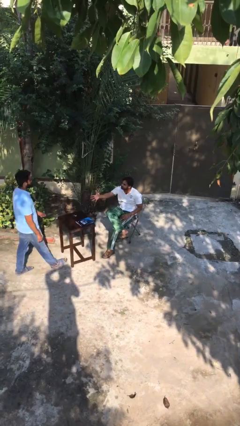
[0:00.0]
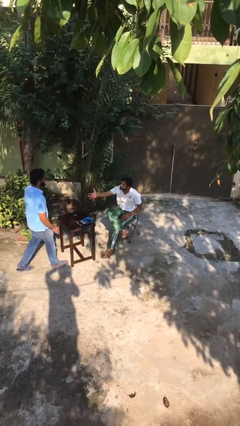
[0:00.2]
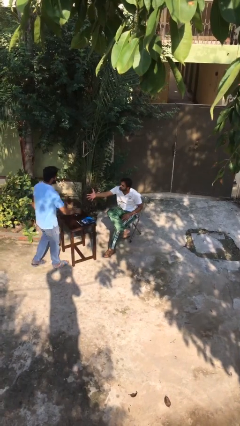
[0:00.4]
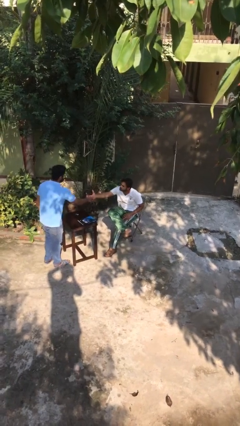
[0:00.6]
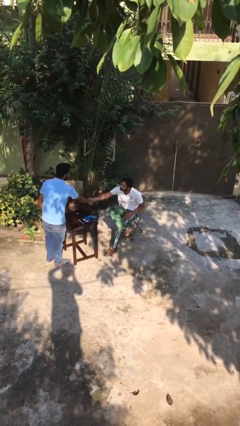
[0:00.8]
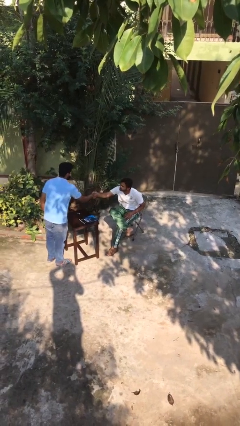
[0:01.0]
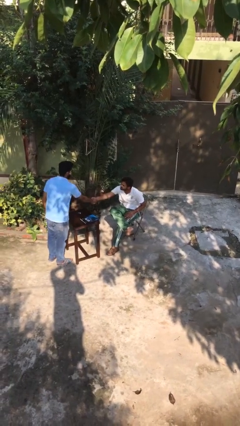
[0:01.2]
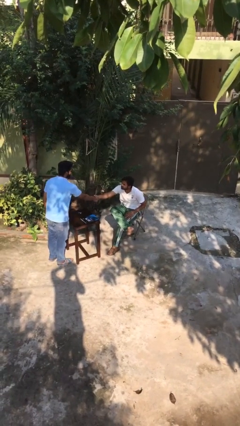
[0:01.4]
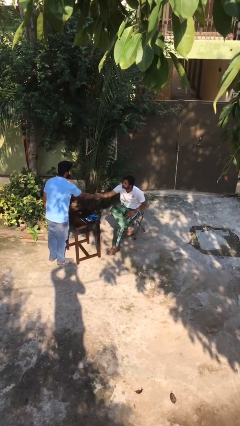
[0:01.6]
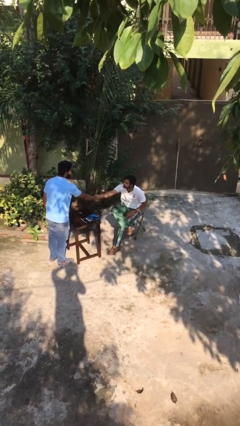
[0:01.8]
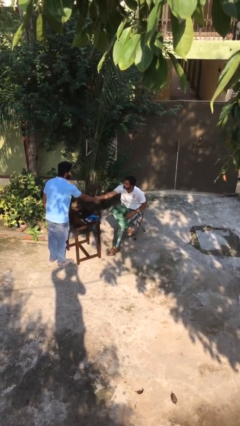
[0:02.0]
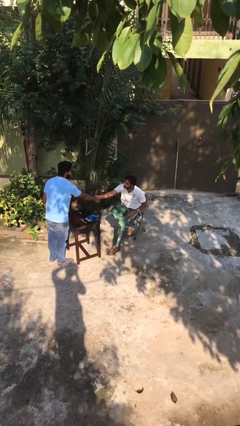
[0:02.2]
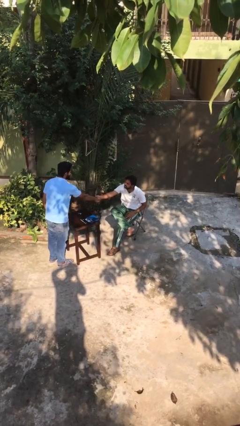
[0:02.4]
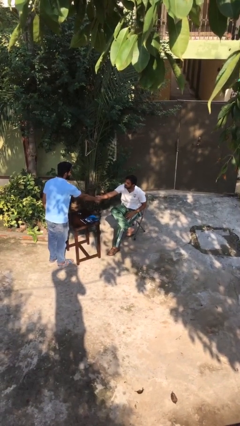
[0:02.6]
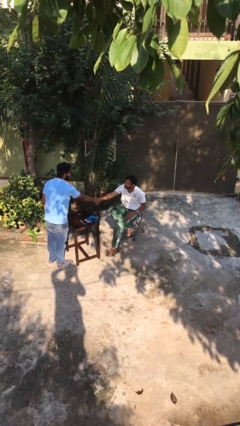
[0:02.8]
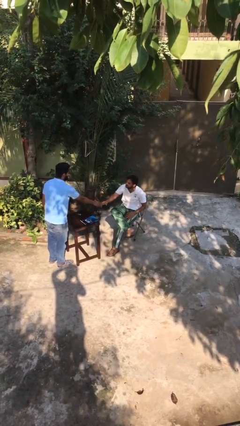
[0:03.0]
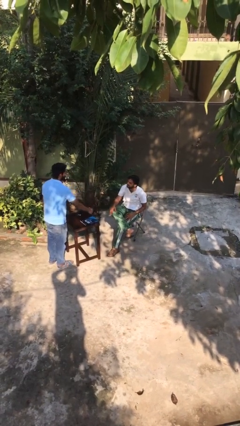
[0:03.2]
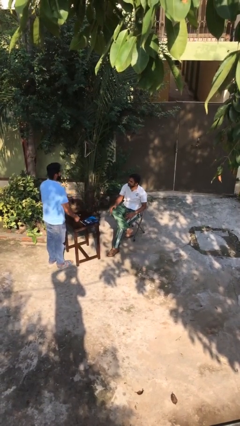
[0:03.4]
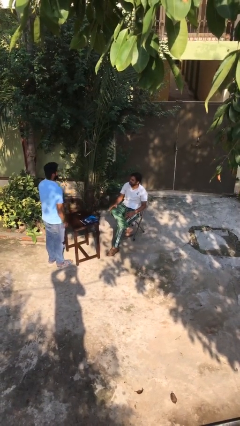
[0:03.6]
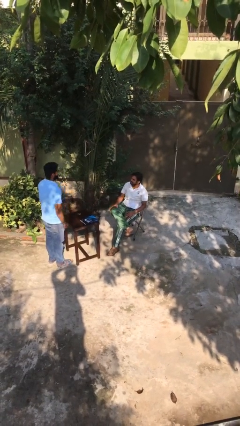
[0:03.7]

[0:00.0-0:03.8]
person shakes hand

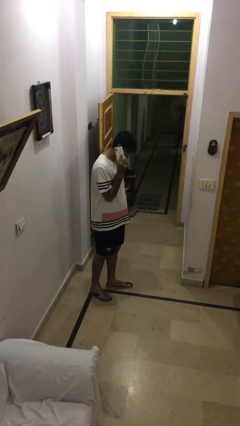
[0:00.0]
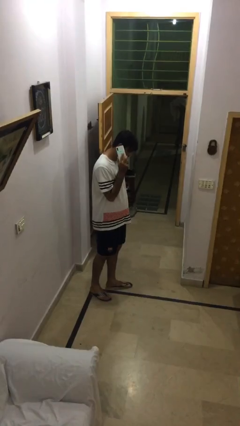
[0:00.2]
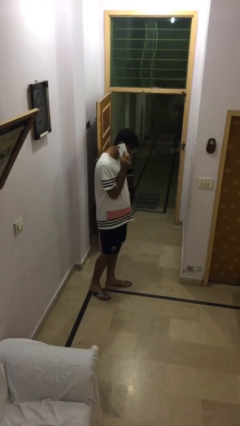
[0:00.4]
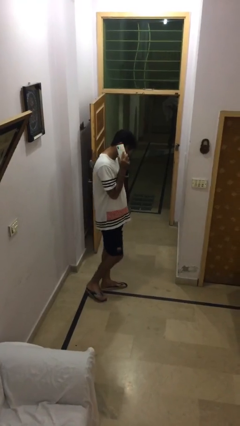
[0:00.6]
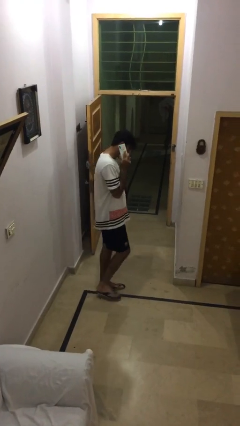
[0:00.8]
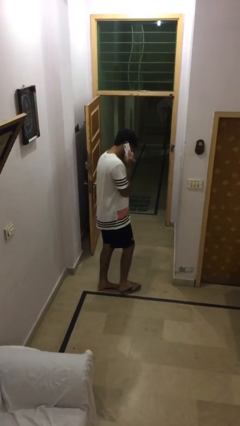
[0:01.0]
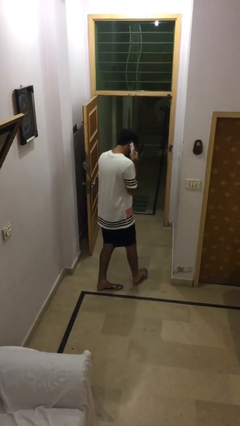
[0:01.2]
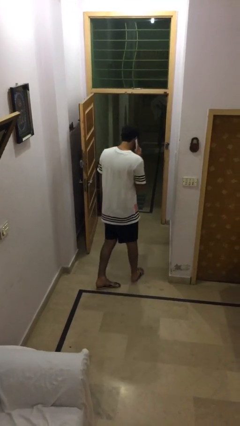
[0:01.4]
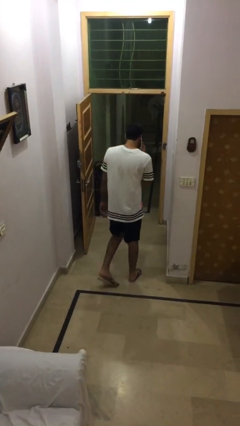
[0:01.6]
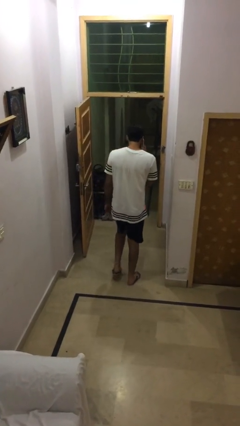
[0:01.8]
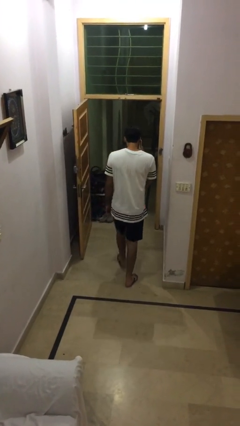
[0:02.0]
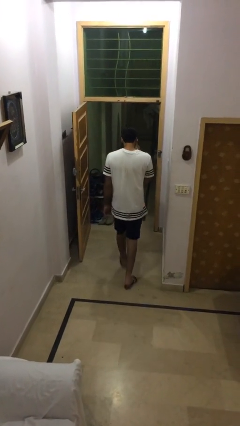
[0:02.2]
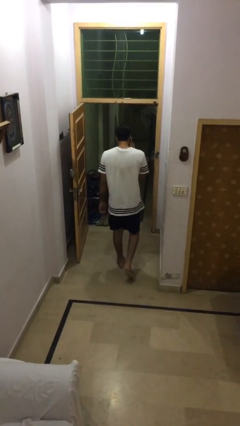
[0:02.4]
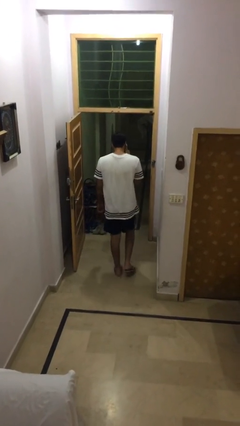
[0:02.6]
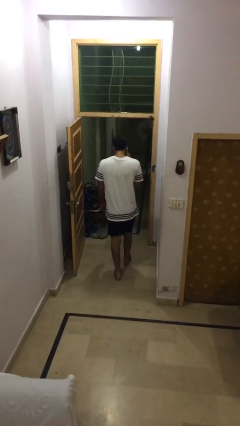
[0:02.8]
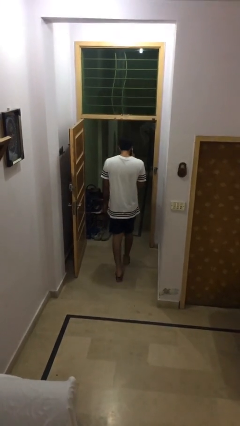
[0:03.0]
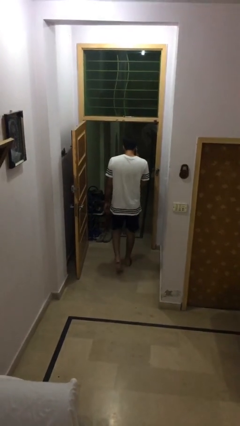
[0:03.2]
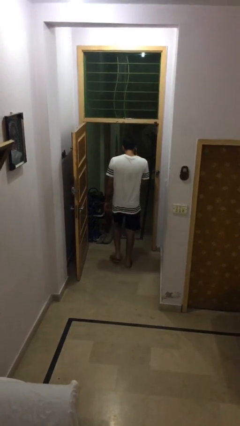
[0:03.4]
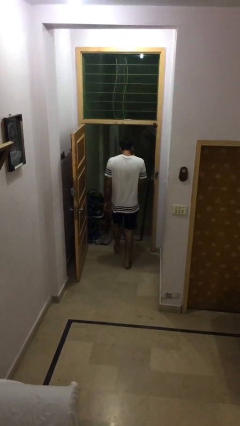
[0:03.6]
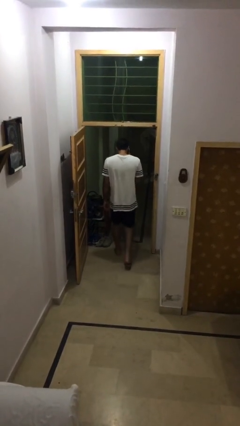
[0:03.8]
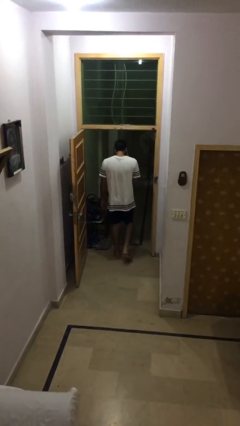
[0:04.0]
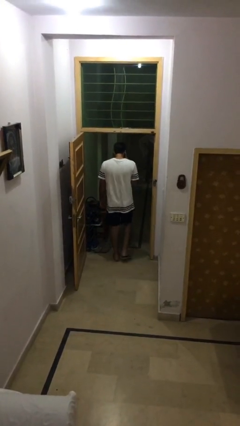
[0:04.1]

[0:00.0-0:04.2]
person exits scene through structure

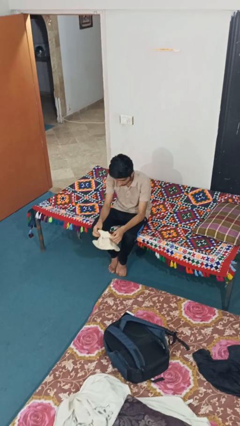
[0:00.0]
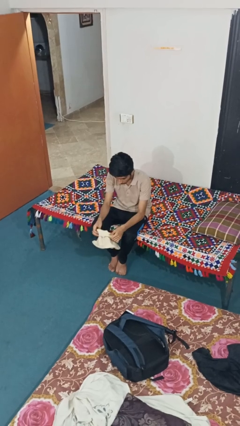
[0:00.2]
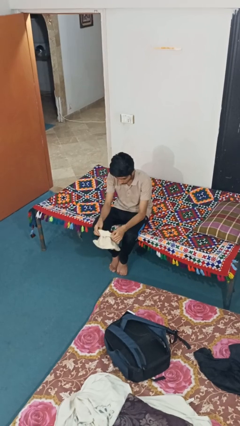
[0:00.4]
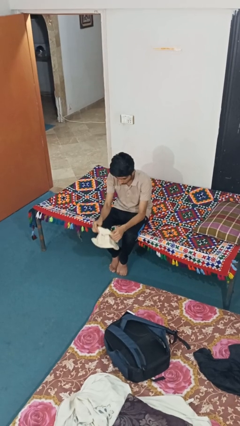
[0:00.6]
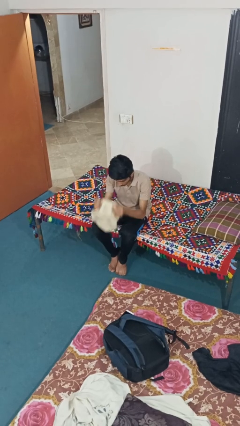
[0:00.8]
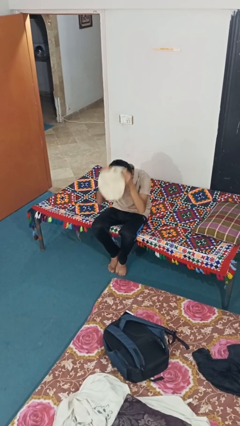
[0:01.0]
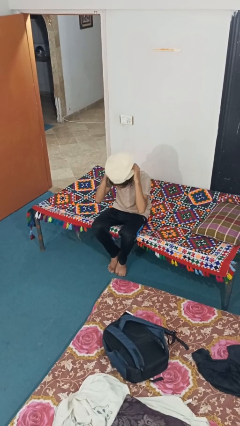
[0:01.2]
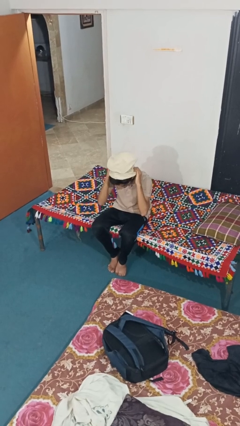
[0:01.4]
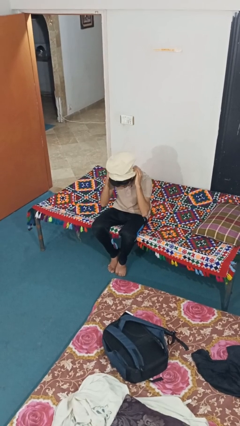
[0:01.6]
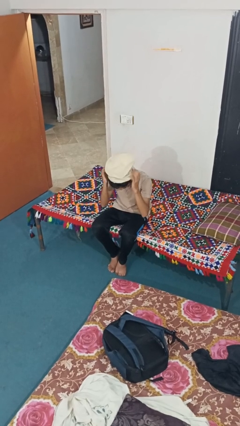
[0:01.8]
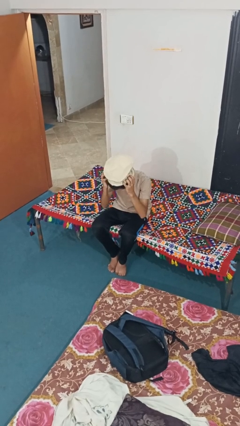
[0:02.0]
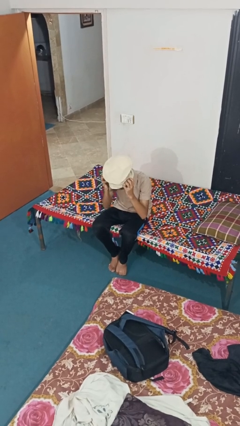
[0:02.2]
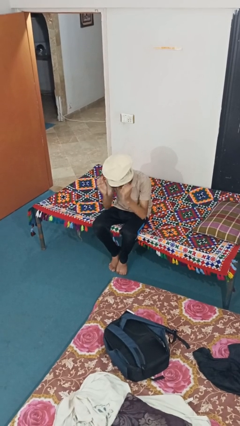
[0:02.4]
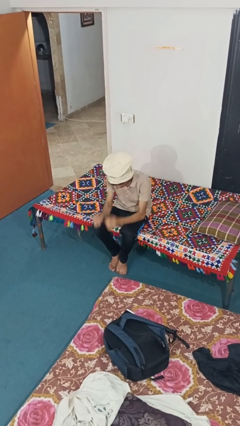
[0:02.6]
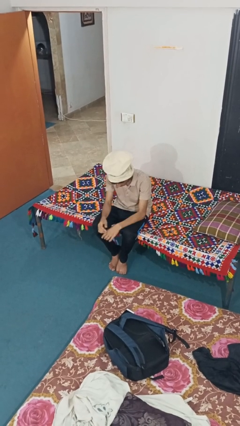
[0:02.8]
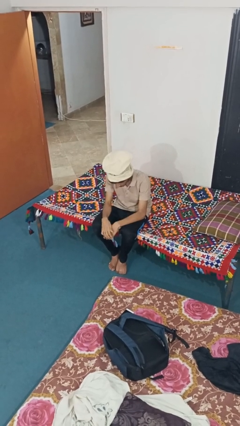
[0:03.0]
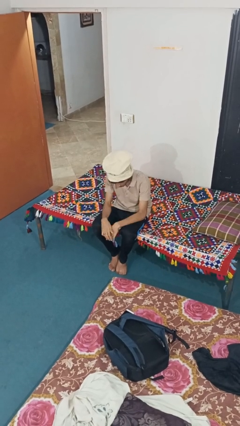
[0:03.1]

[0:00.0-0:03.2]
person puts on hat

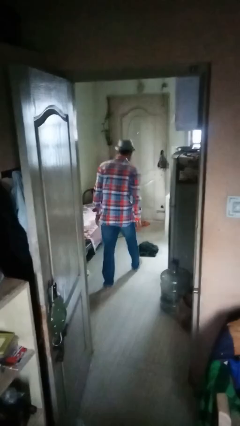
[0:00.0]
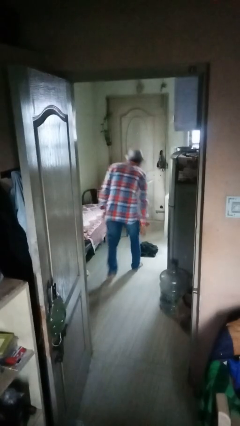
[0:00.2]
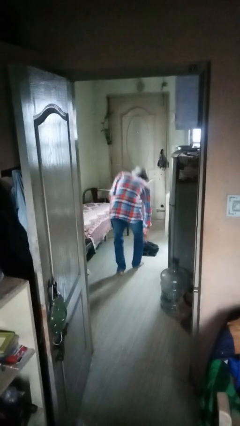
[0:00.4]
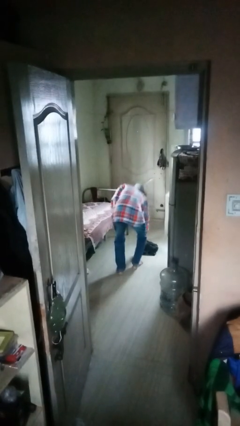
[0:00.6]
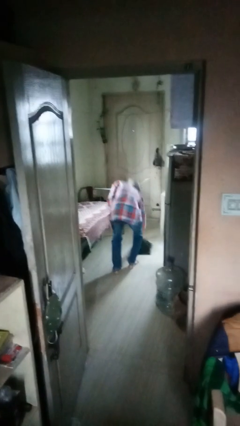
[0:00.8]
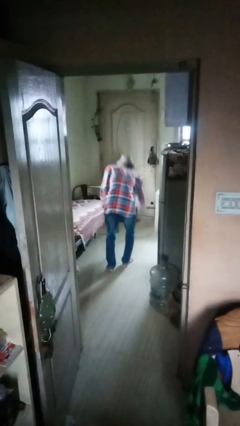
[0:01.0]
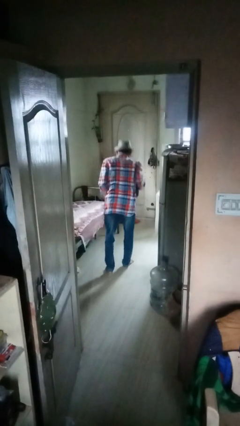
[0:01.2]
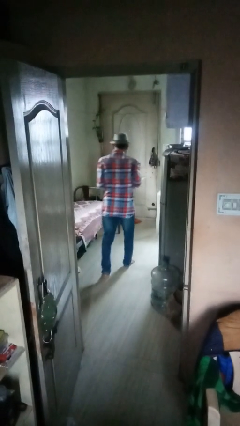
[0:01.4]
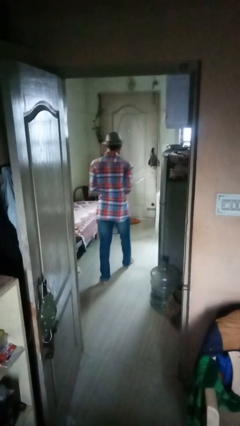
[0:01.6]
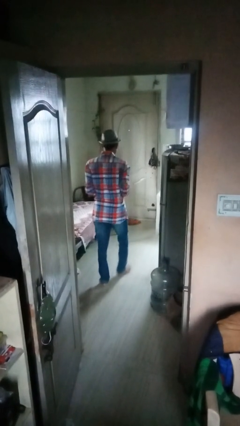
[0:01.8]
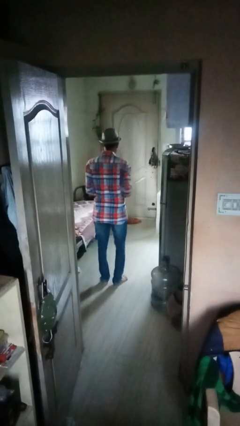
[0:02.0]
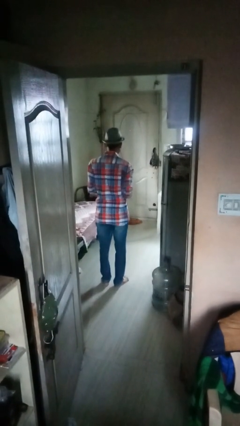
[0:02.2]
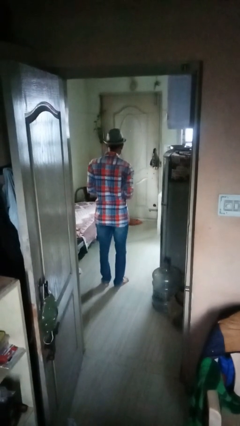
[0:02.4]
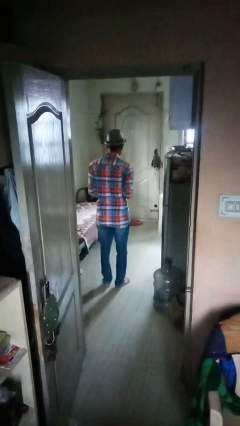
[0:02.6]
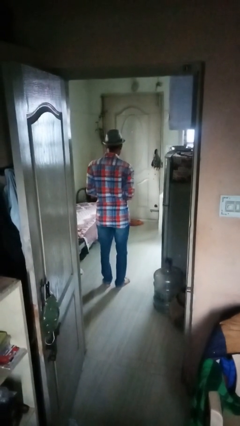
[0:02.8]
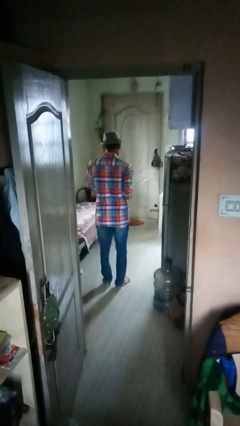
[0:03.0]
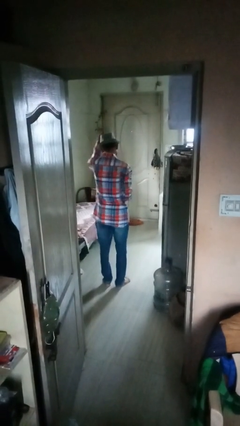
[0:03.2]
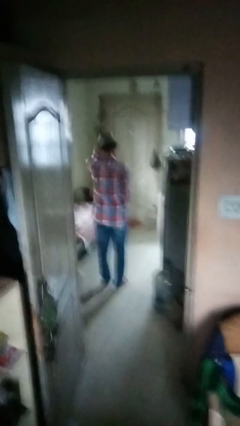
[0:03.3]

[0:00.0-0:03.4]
person picks up object from floor

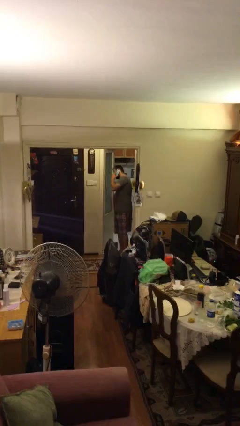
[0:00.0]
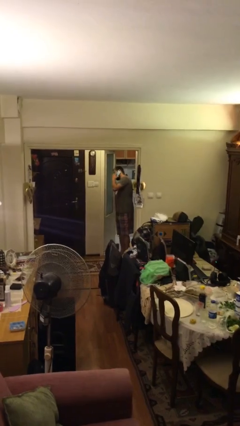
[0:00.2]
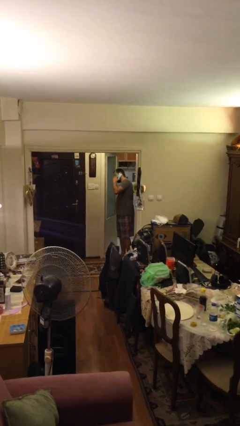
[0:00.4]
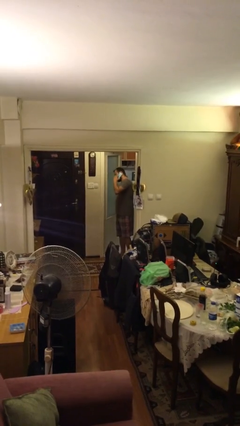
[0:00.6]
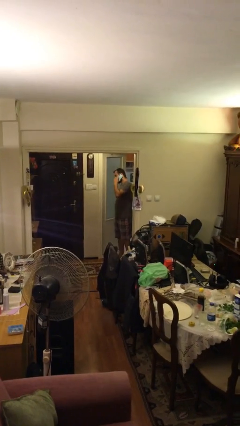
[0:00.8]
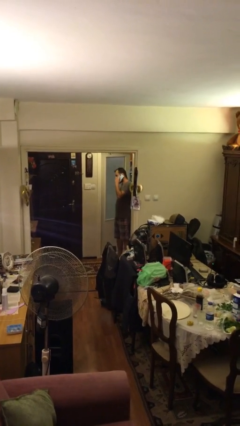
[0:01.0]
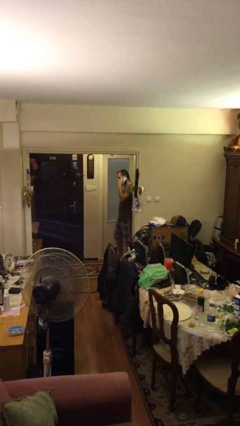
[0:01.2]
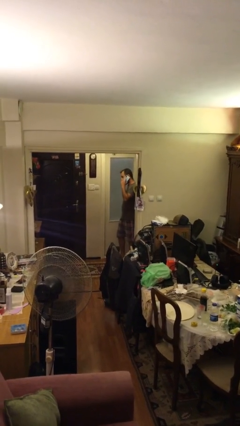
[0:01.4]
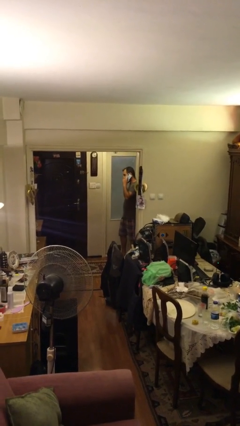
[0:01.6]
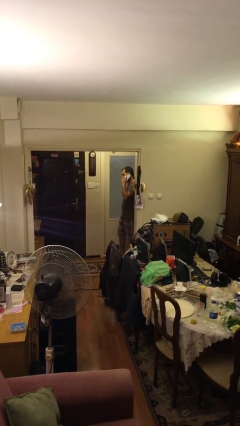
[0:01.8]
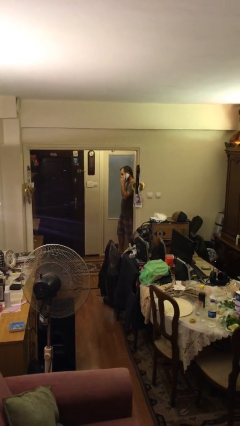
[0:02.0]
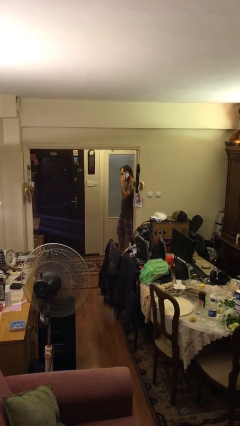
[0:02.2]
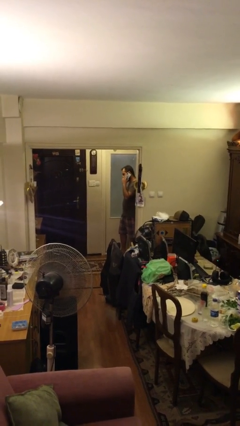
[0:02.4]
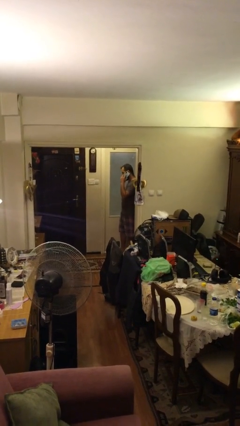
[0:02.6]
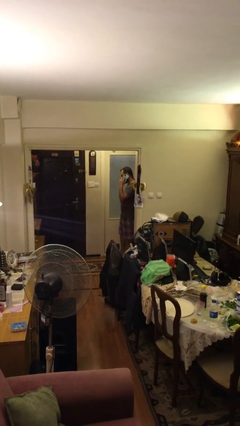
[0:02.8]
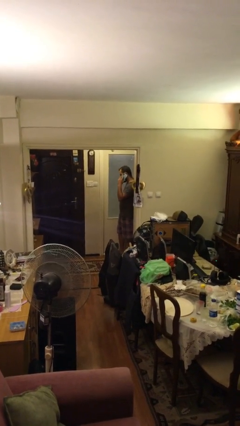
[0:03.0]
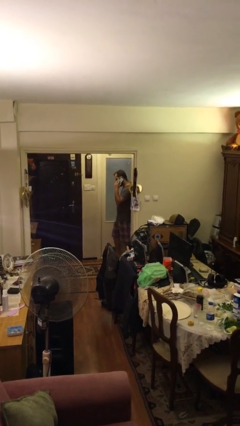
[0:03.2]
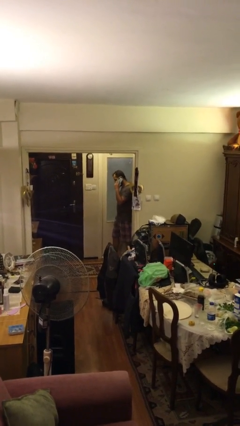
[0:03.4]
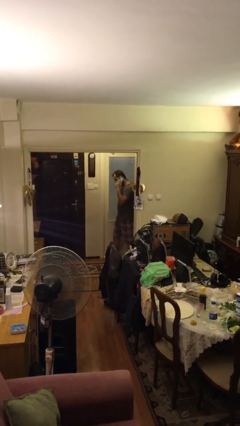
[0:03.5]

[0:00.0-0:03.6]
person closes facility door
